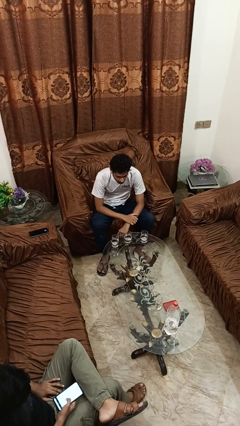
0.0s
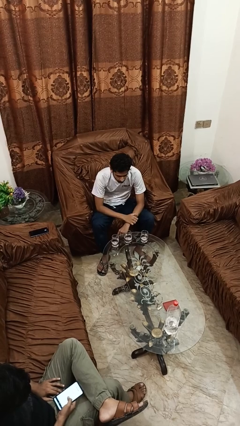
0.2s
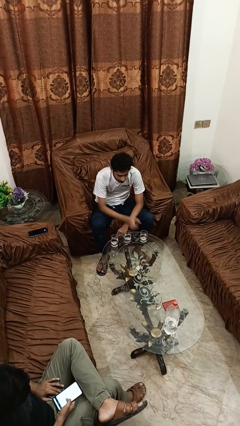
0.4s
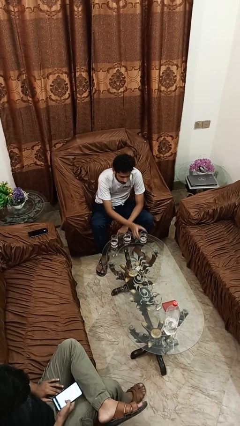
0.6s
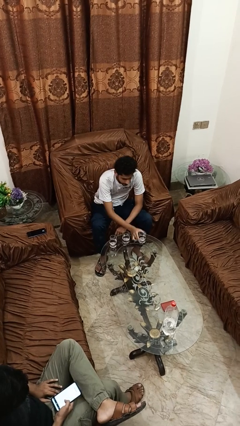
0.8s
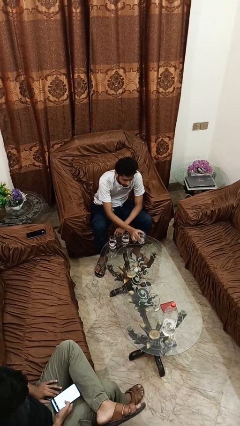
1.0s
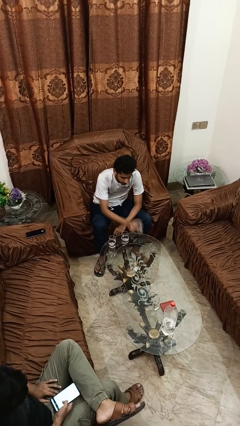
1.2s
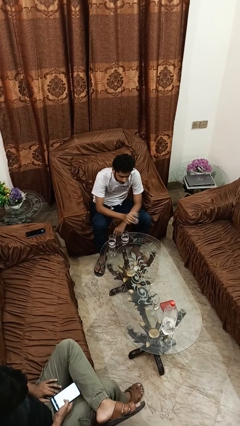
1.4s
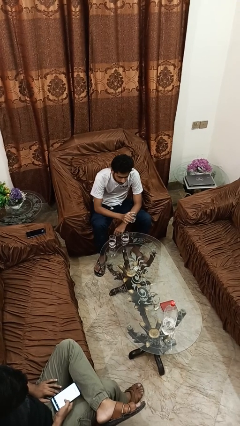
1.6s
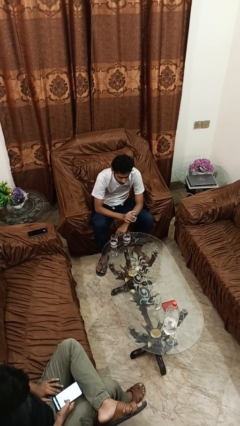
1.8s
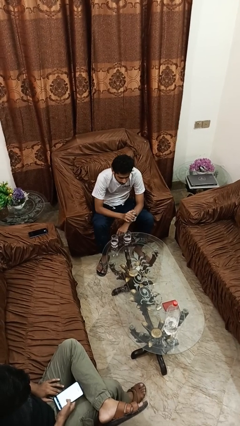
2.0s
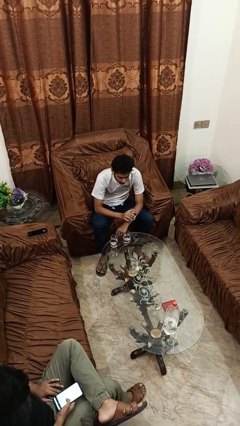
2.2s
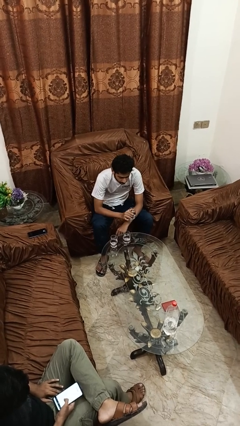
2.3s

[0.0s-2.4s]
person picks up object from table

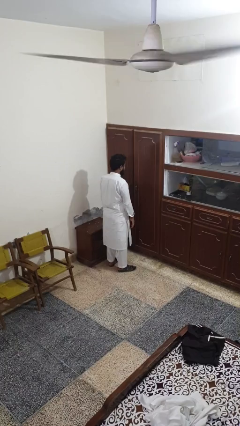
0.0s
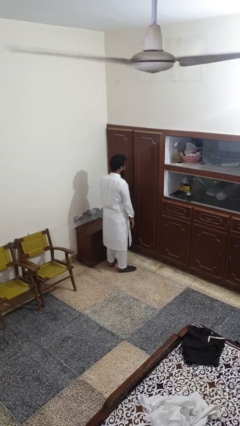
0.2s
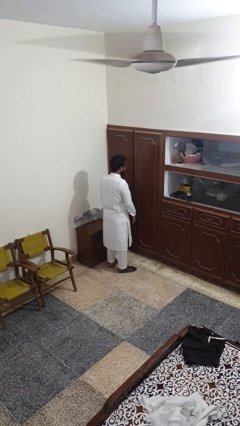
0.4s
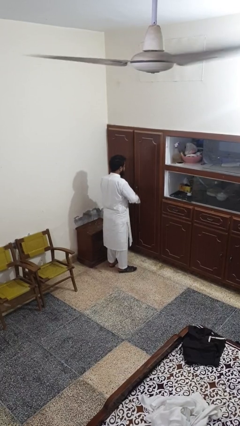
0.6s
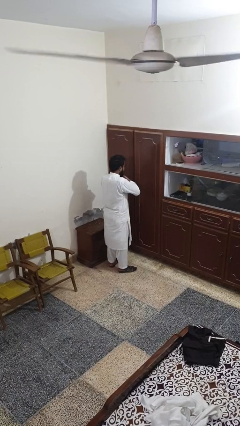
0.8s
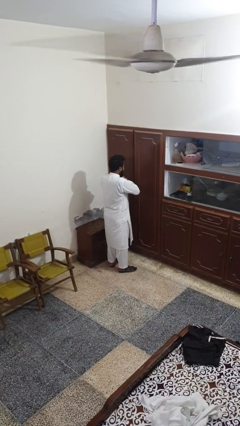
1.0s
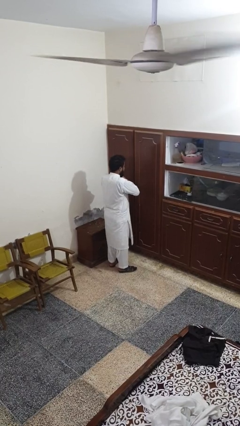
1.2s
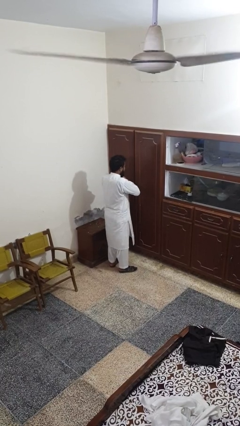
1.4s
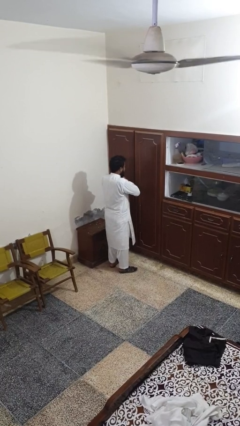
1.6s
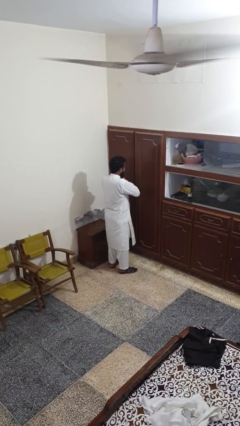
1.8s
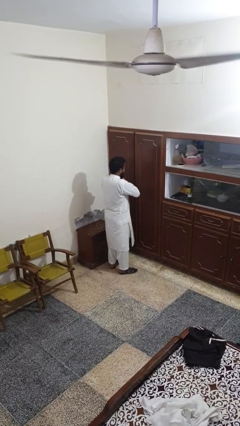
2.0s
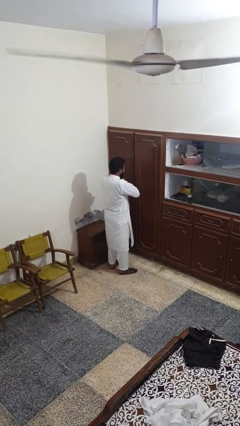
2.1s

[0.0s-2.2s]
person prays

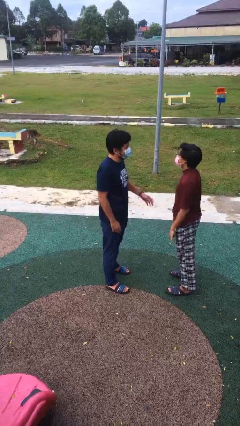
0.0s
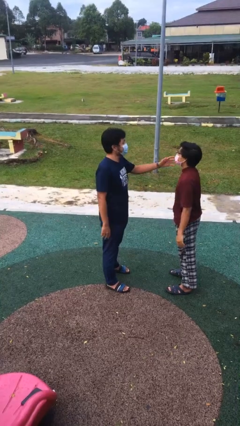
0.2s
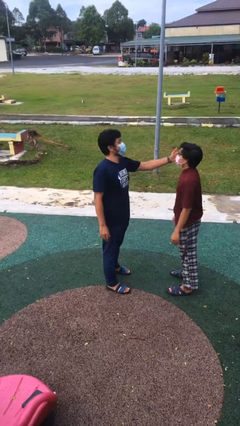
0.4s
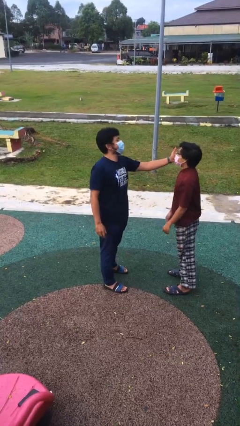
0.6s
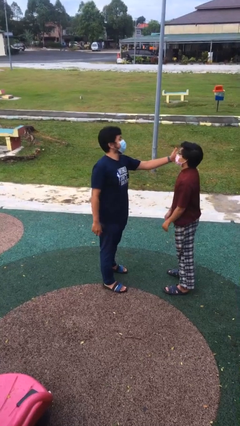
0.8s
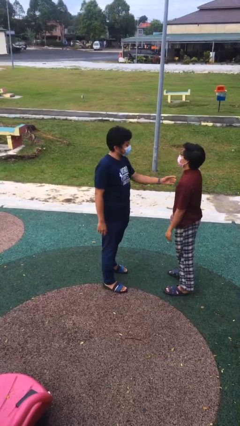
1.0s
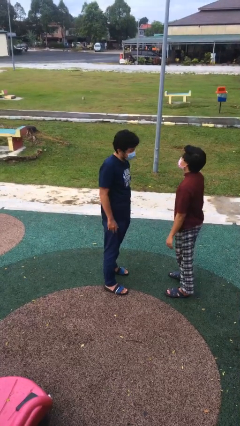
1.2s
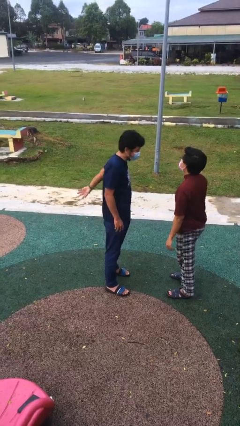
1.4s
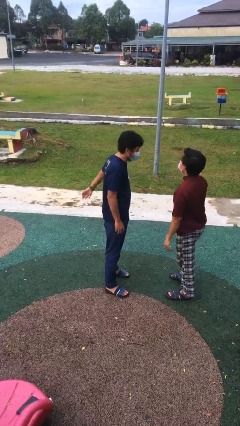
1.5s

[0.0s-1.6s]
person touches face of person

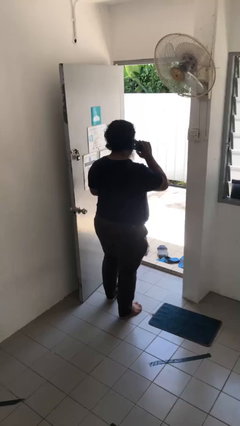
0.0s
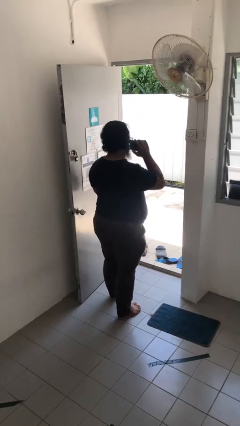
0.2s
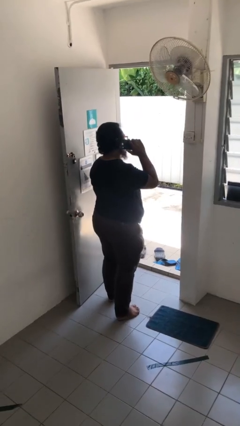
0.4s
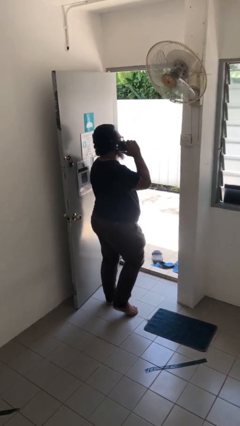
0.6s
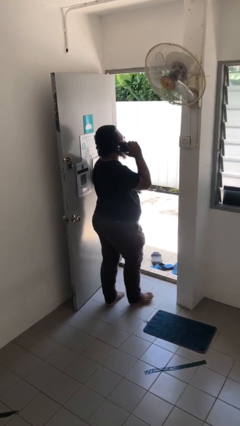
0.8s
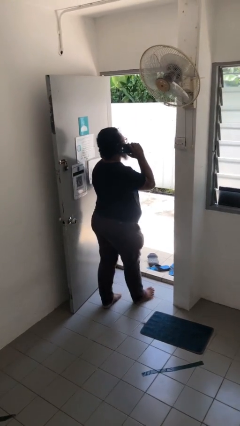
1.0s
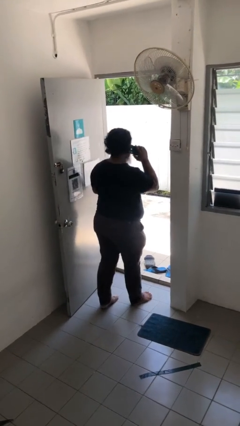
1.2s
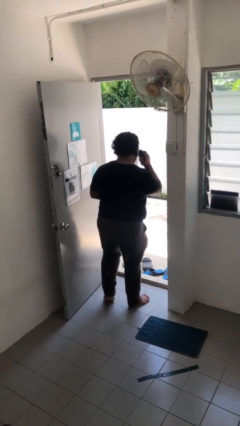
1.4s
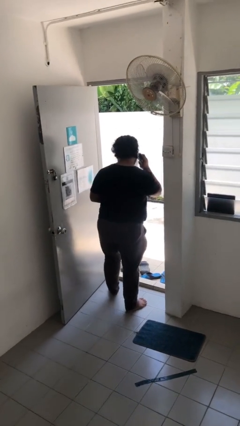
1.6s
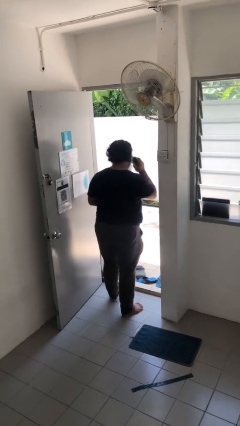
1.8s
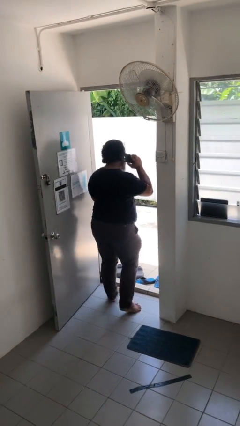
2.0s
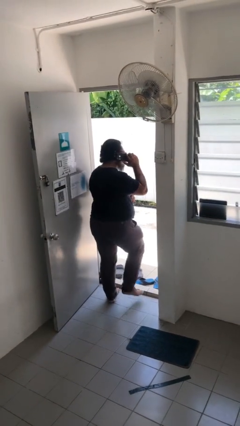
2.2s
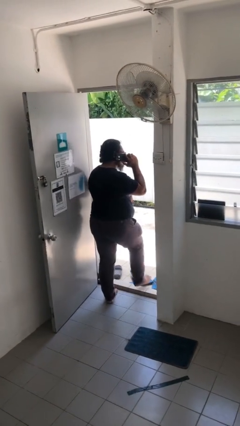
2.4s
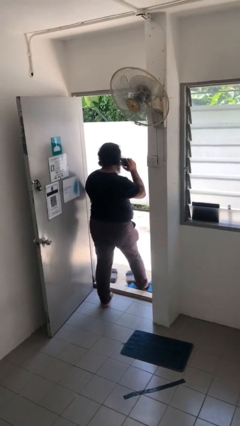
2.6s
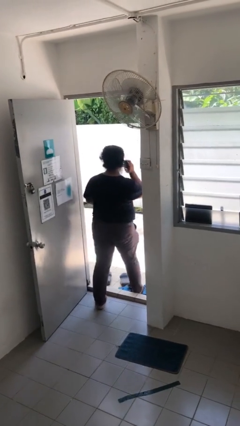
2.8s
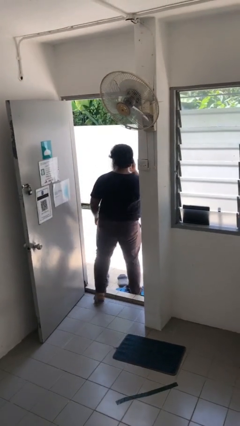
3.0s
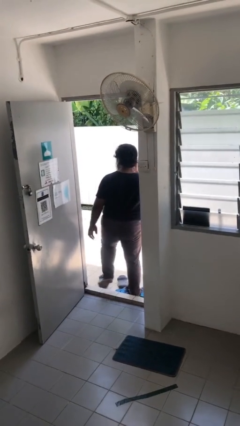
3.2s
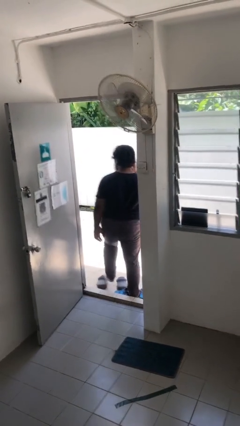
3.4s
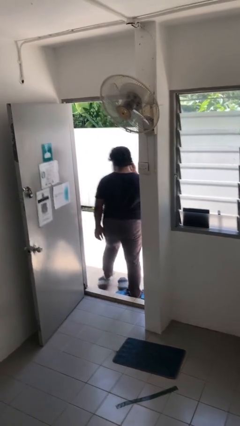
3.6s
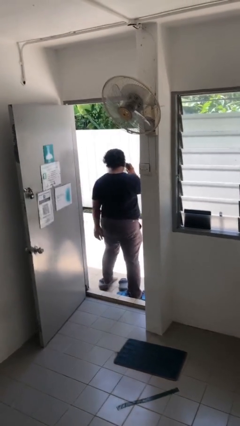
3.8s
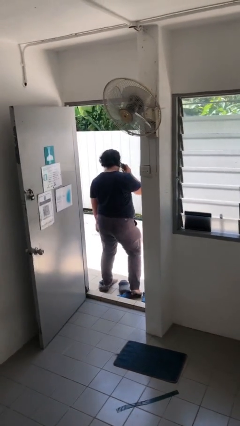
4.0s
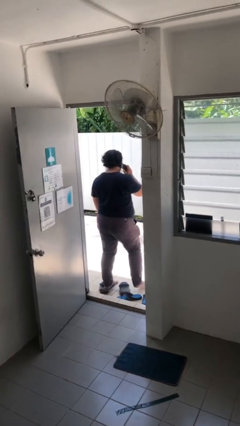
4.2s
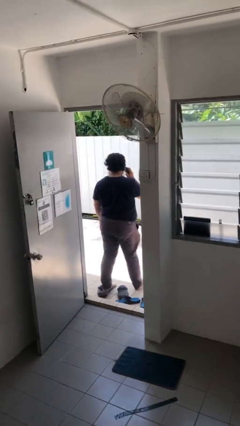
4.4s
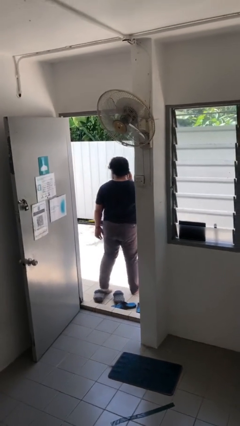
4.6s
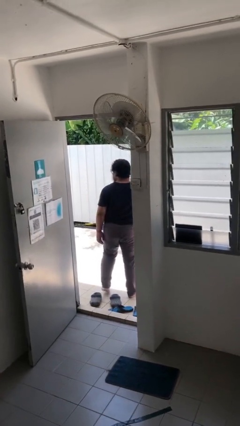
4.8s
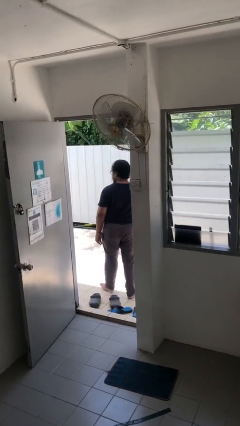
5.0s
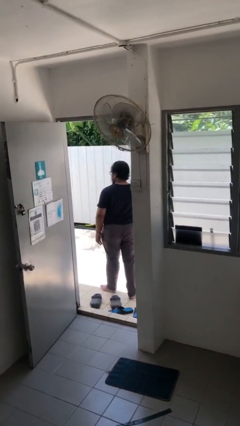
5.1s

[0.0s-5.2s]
person exits scene through structure

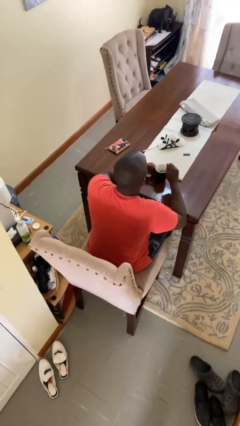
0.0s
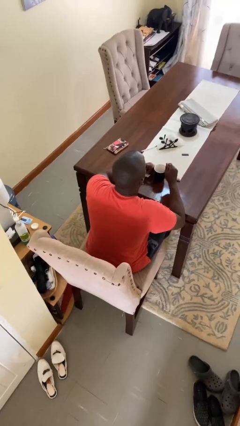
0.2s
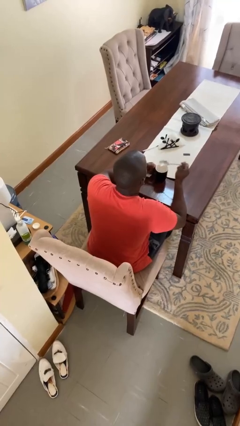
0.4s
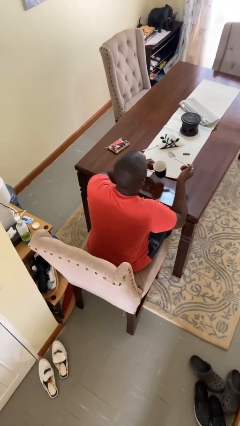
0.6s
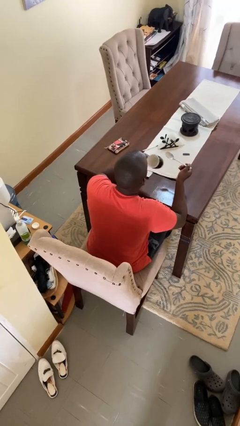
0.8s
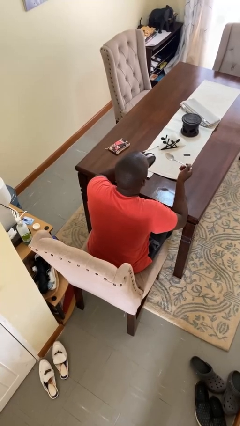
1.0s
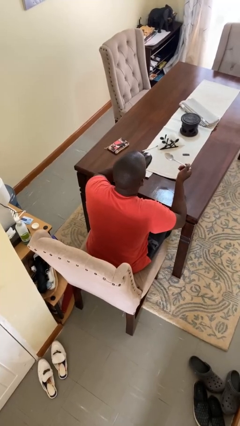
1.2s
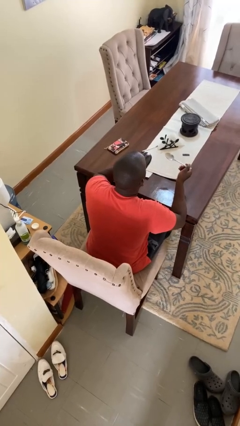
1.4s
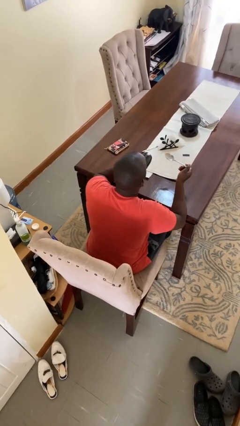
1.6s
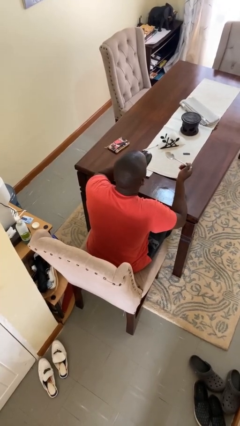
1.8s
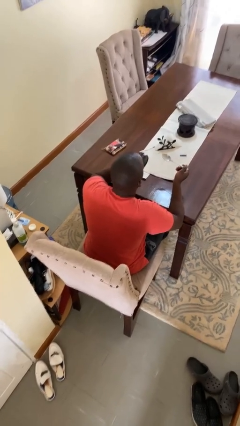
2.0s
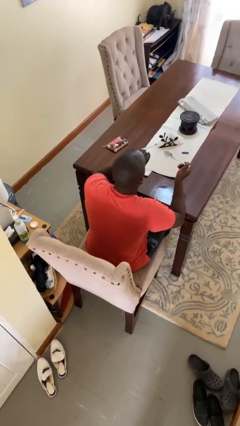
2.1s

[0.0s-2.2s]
person drinks from mug

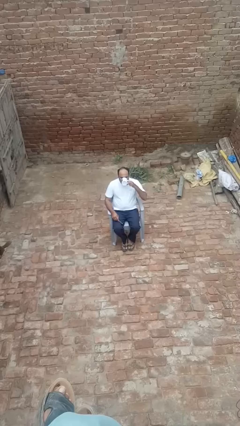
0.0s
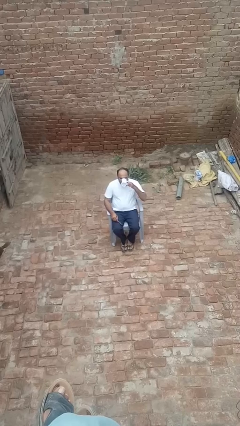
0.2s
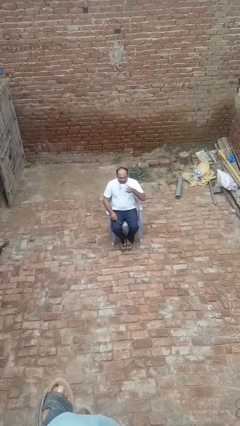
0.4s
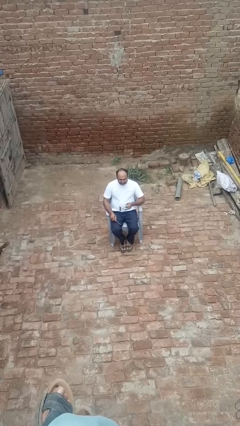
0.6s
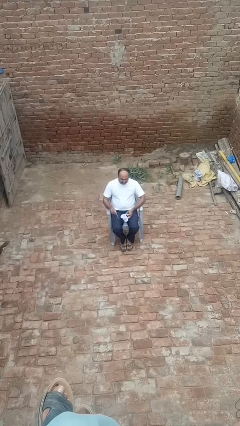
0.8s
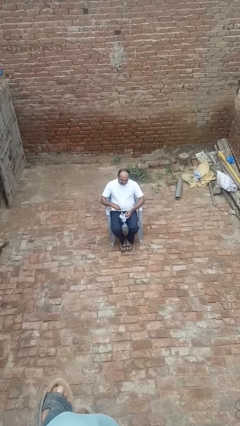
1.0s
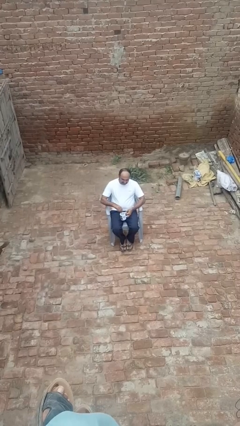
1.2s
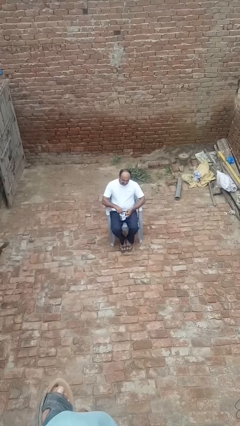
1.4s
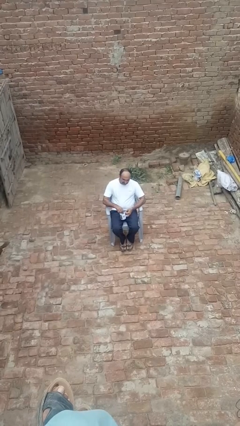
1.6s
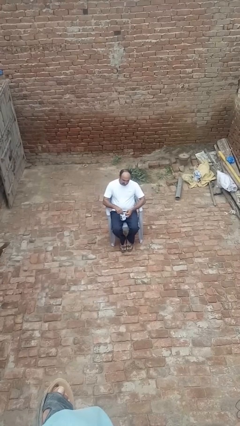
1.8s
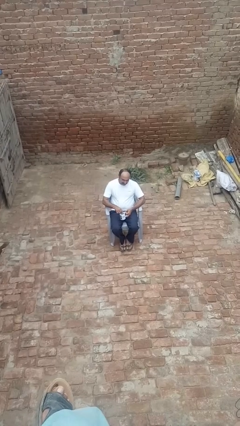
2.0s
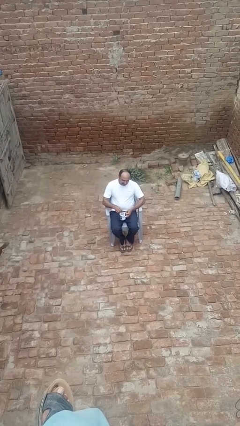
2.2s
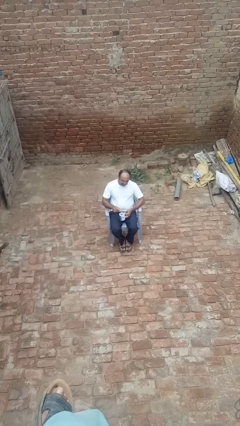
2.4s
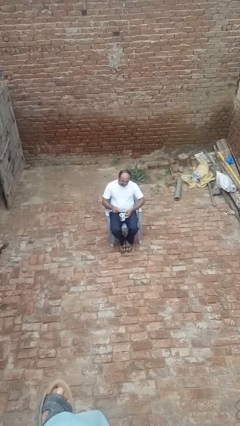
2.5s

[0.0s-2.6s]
person stirs mug

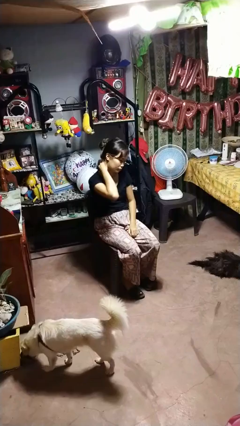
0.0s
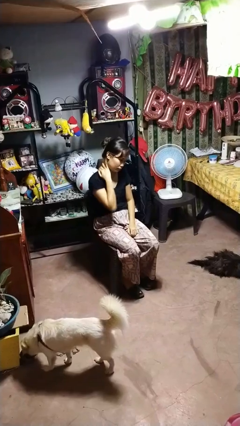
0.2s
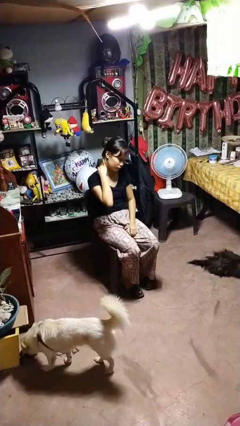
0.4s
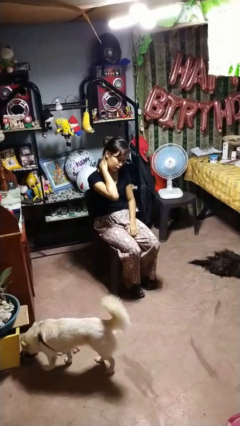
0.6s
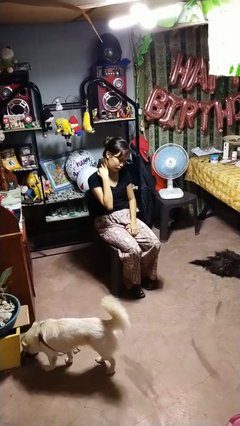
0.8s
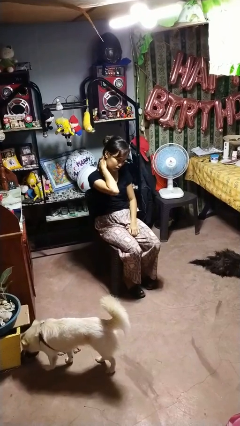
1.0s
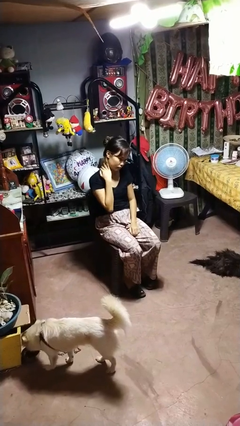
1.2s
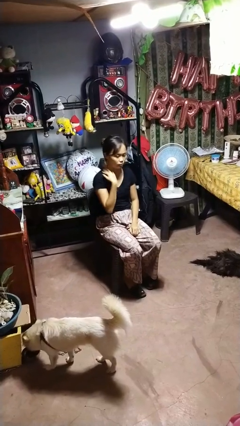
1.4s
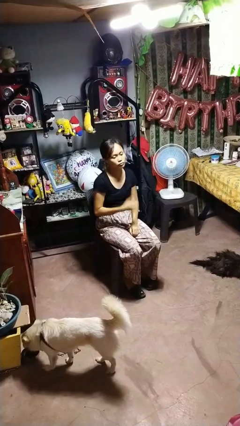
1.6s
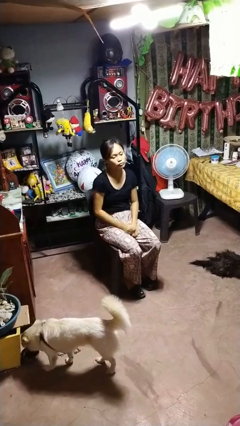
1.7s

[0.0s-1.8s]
person rubs neck
